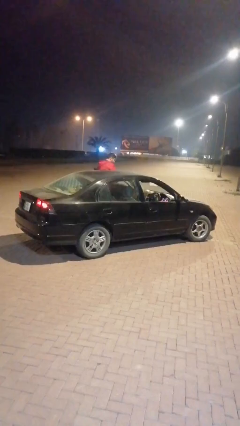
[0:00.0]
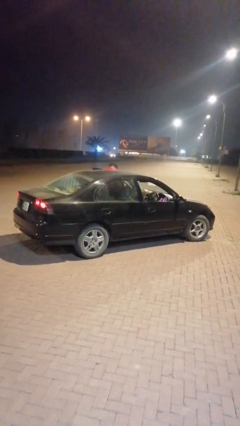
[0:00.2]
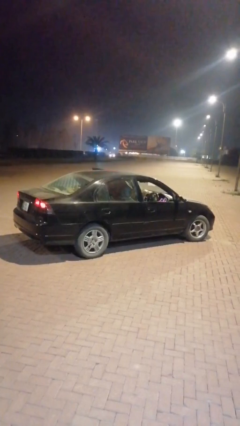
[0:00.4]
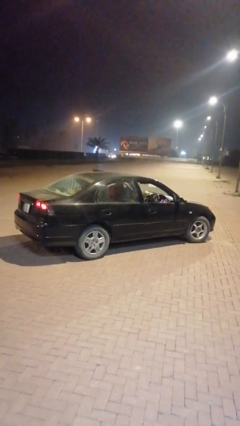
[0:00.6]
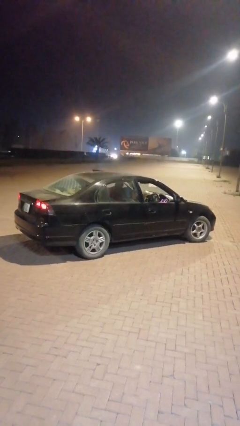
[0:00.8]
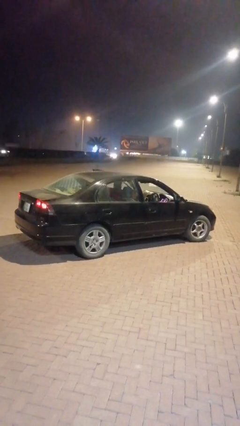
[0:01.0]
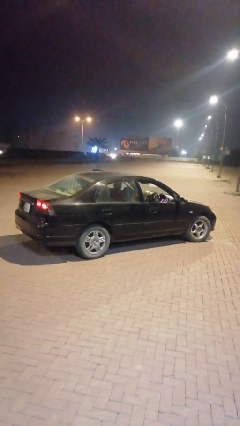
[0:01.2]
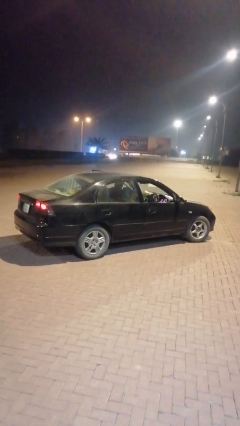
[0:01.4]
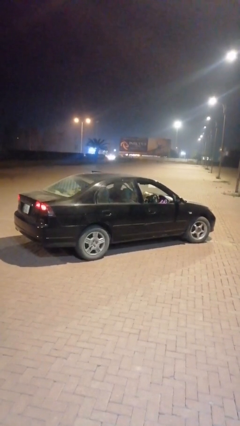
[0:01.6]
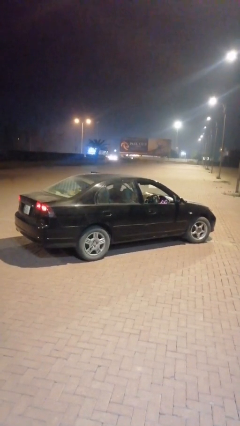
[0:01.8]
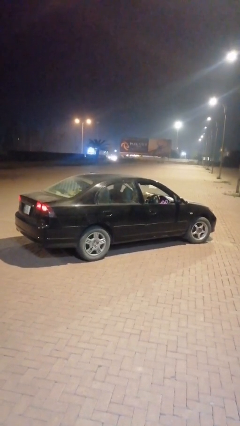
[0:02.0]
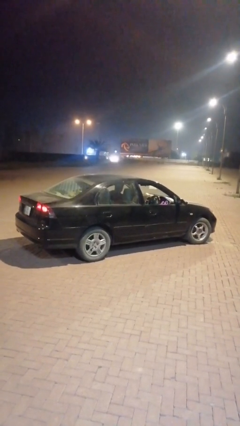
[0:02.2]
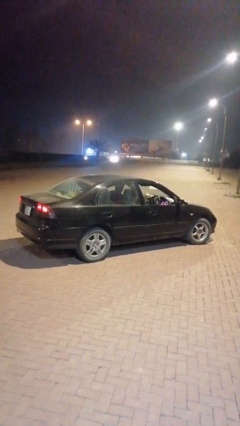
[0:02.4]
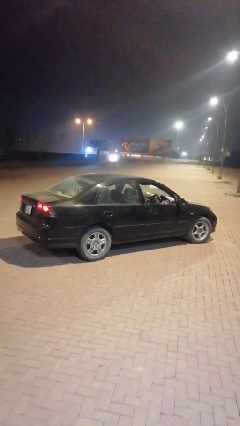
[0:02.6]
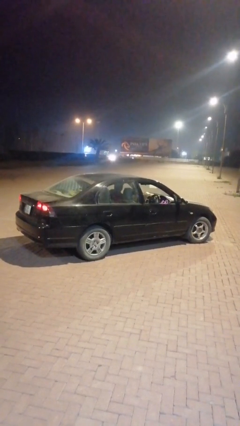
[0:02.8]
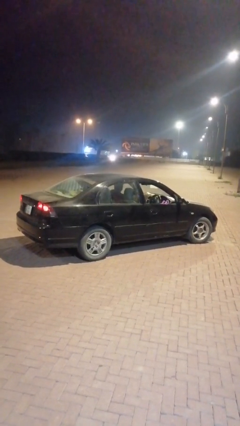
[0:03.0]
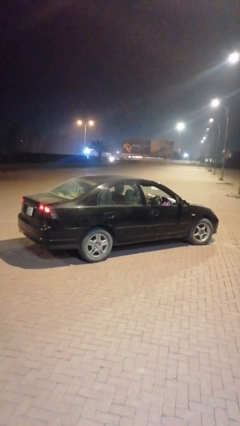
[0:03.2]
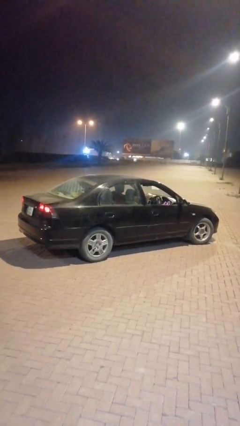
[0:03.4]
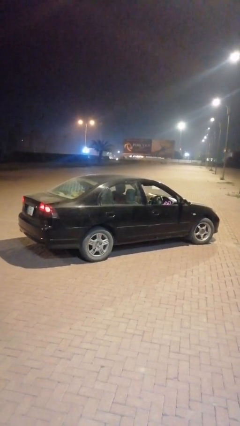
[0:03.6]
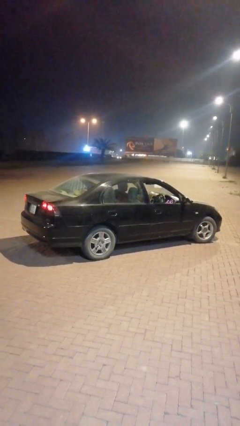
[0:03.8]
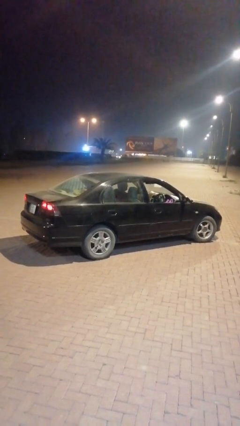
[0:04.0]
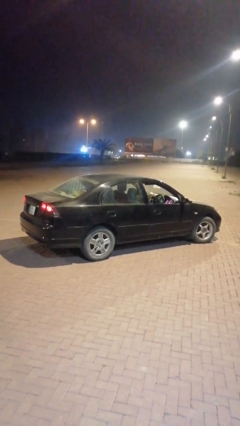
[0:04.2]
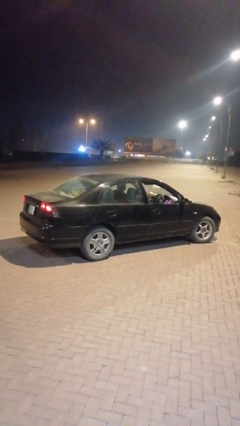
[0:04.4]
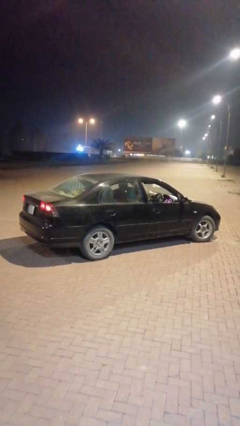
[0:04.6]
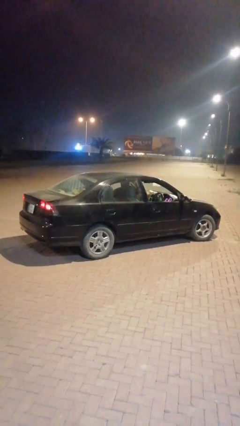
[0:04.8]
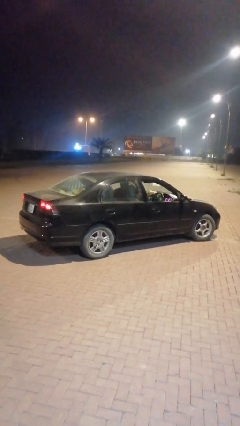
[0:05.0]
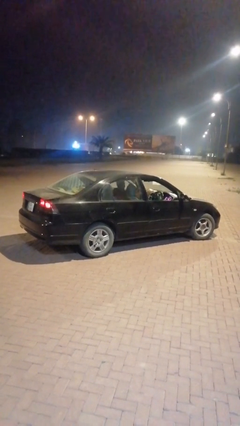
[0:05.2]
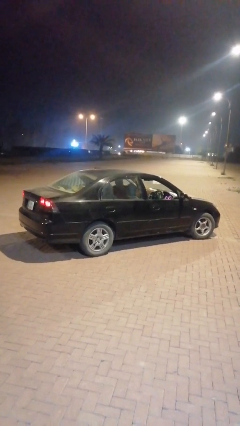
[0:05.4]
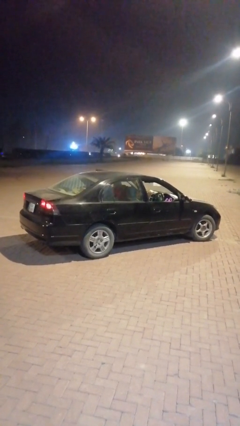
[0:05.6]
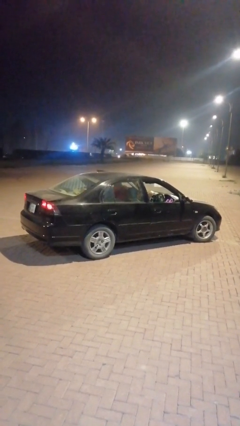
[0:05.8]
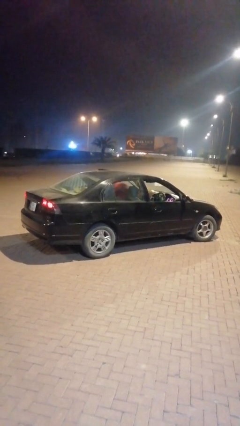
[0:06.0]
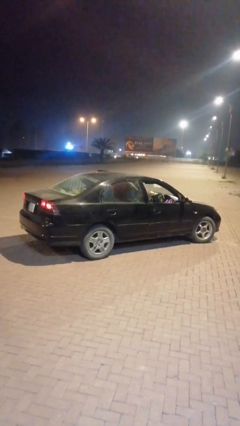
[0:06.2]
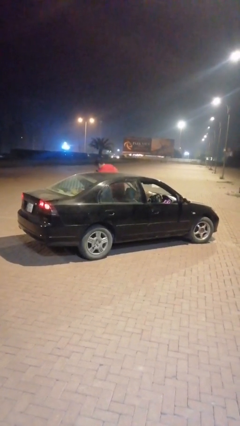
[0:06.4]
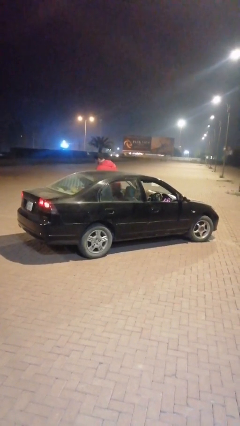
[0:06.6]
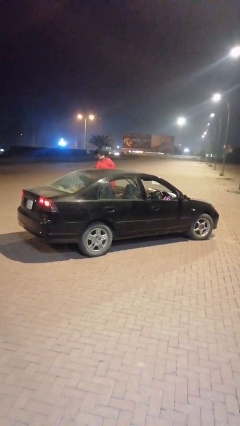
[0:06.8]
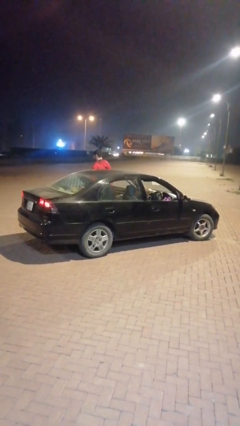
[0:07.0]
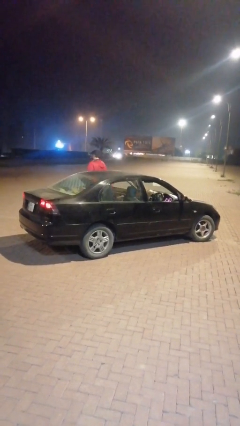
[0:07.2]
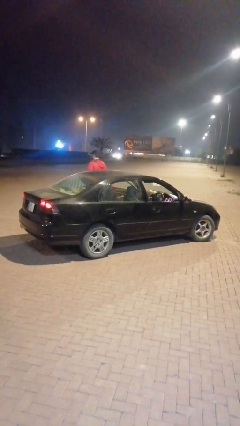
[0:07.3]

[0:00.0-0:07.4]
car picks up person

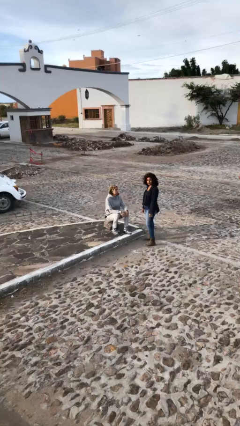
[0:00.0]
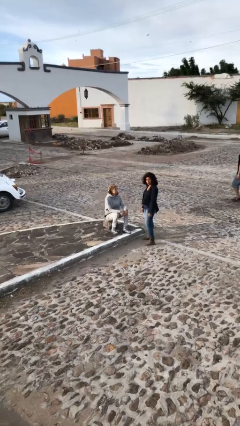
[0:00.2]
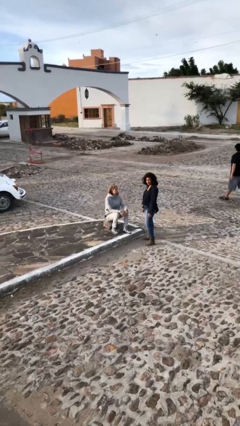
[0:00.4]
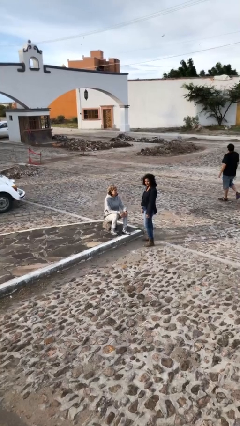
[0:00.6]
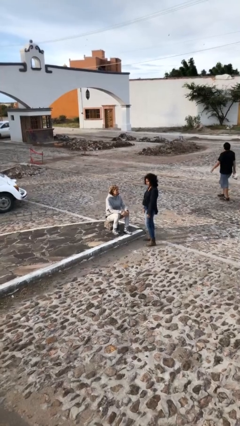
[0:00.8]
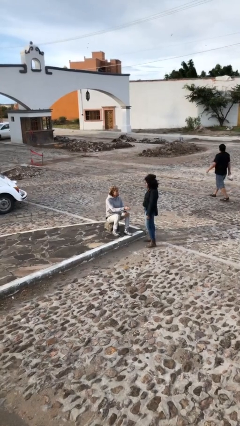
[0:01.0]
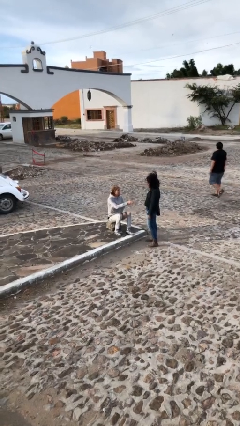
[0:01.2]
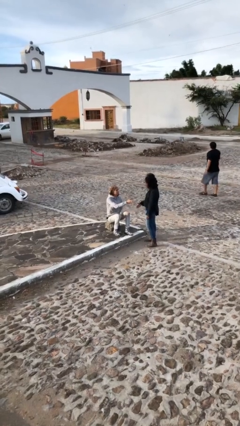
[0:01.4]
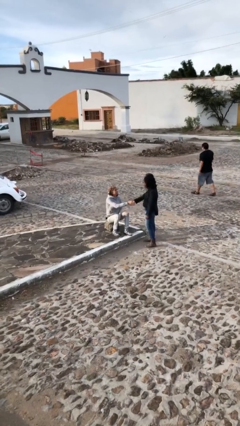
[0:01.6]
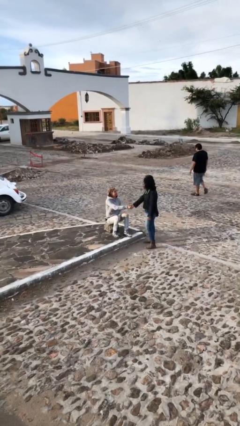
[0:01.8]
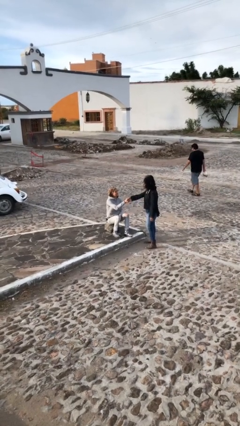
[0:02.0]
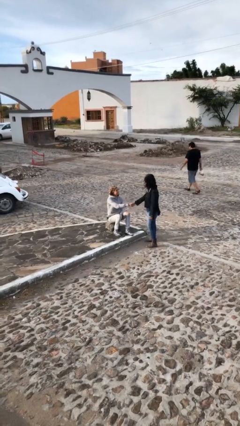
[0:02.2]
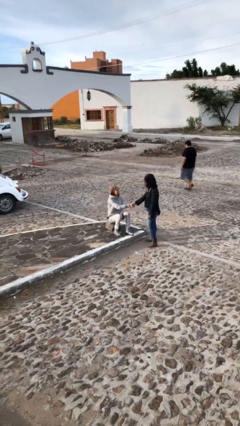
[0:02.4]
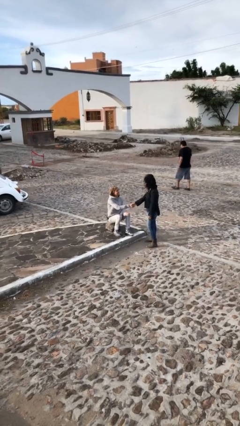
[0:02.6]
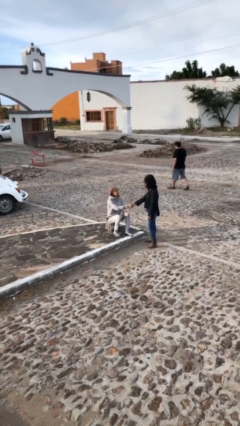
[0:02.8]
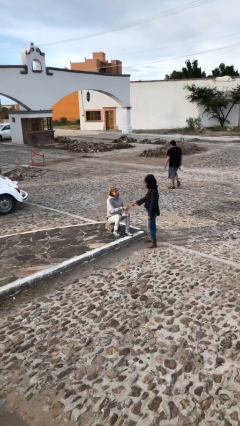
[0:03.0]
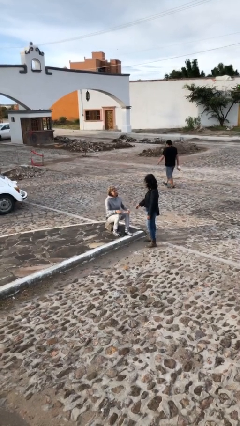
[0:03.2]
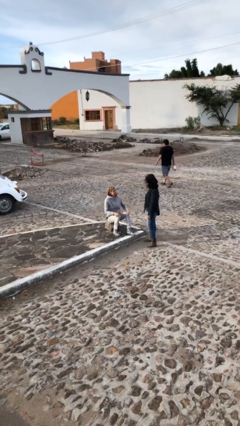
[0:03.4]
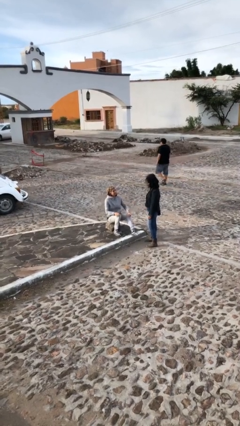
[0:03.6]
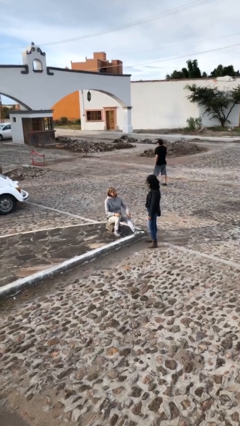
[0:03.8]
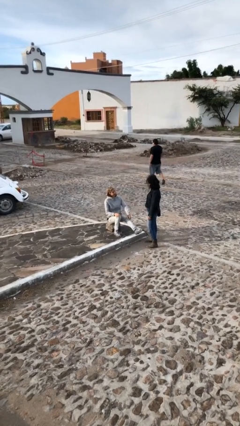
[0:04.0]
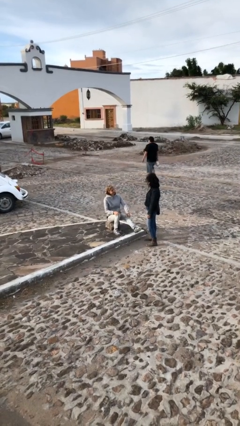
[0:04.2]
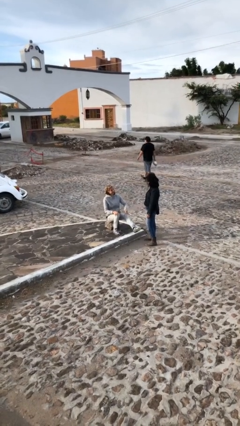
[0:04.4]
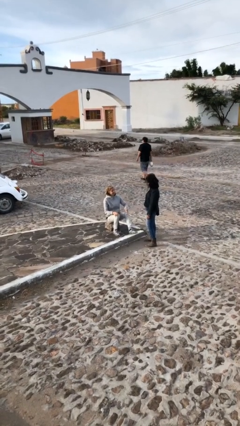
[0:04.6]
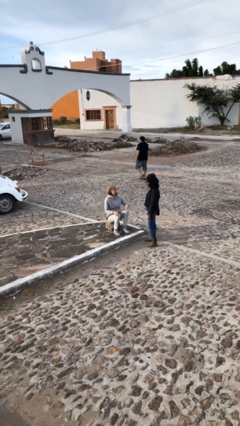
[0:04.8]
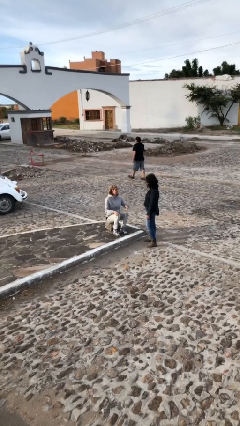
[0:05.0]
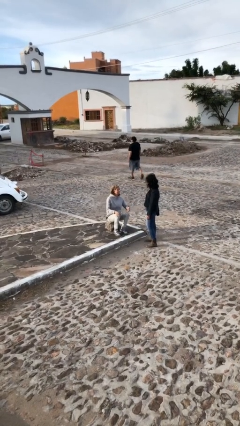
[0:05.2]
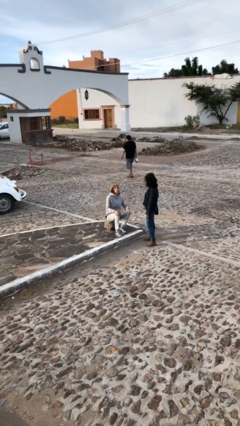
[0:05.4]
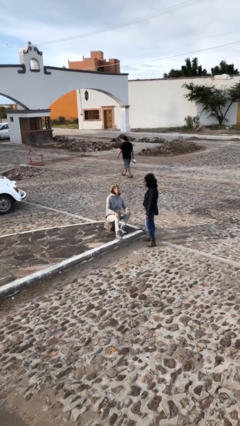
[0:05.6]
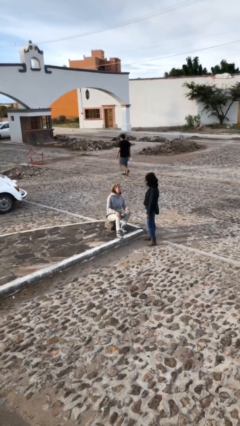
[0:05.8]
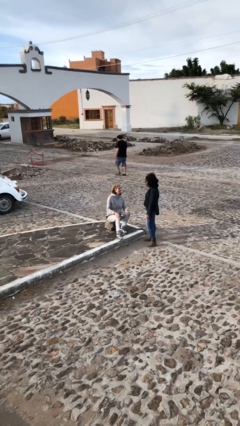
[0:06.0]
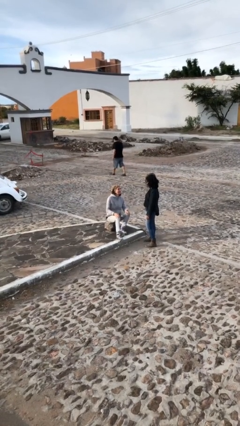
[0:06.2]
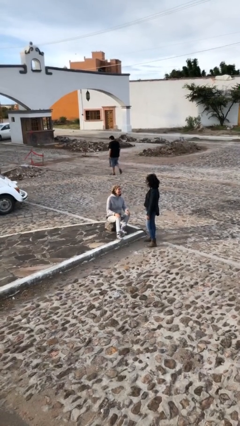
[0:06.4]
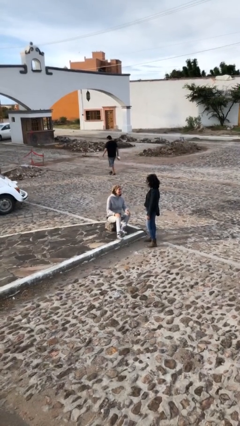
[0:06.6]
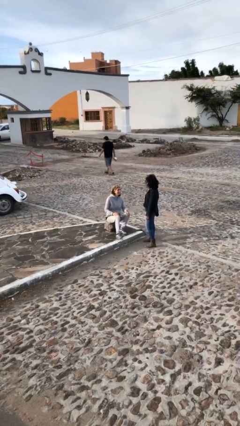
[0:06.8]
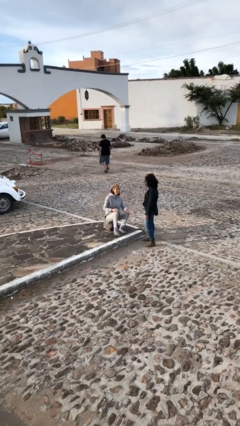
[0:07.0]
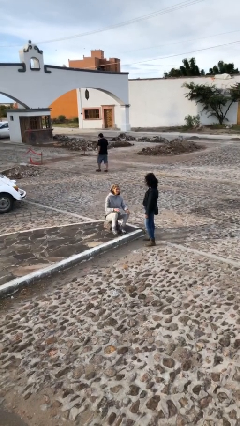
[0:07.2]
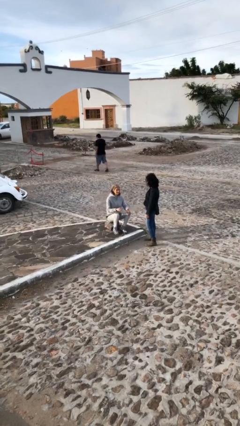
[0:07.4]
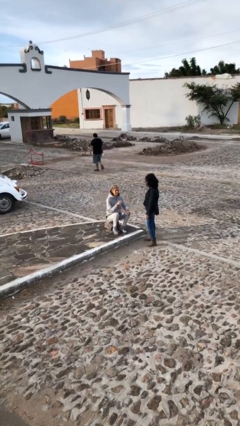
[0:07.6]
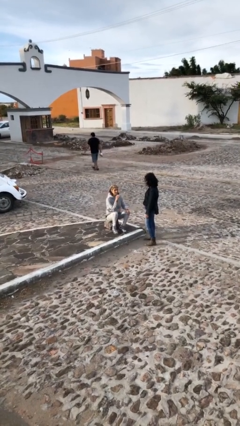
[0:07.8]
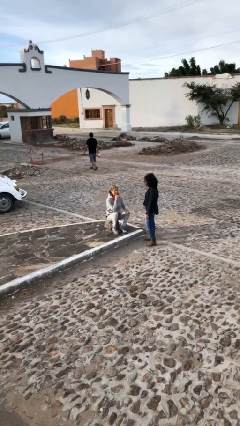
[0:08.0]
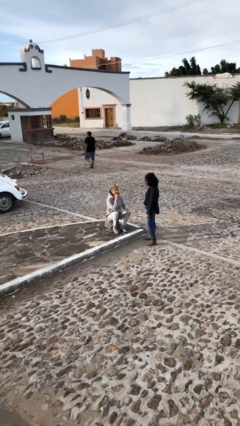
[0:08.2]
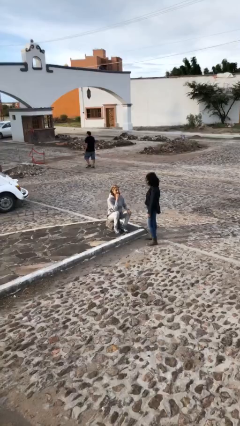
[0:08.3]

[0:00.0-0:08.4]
person shakes hand

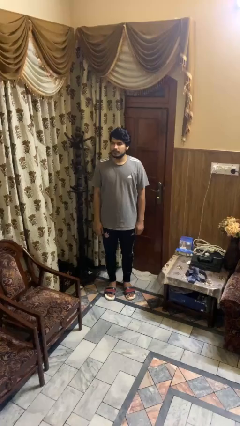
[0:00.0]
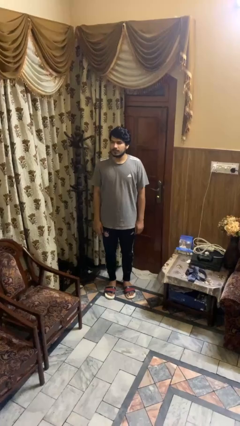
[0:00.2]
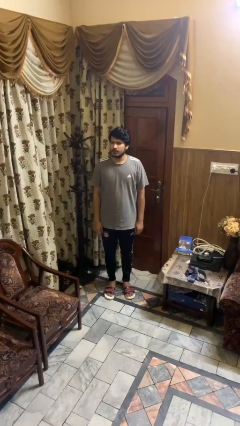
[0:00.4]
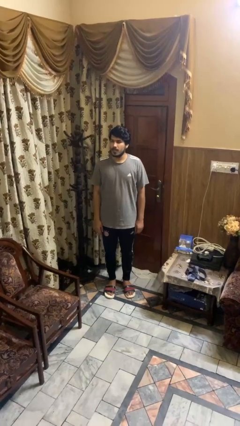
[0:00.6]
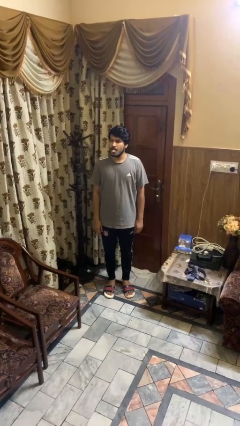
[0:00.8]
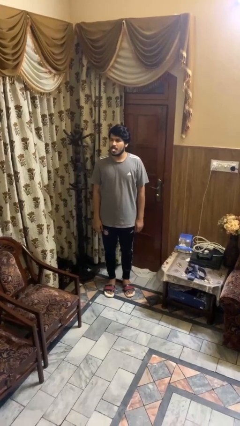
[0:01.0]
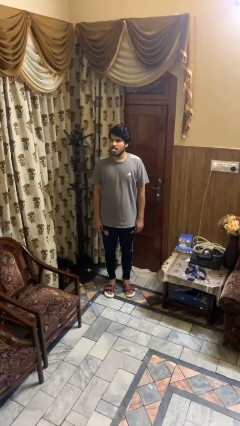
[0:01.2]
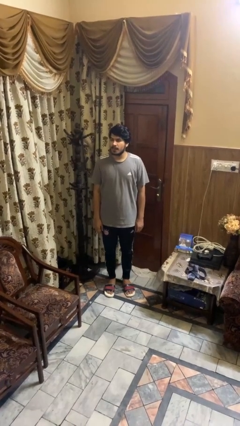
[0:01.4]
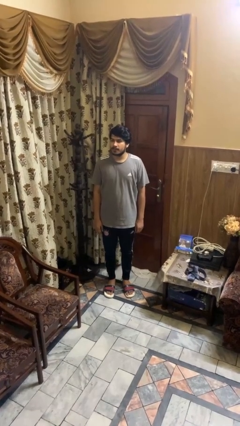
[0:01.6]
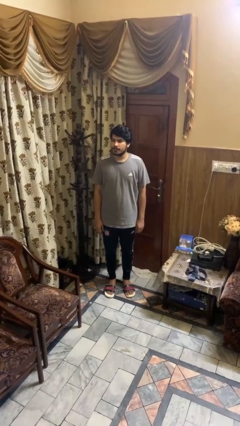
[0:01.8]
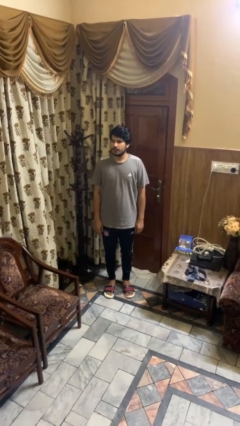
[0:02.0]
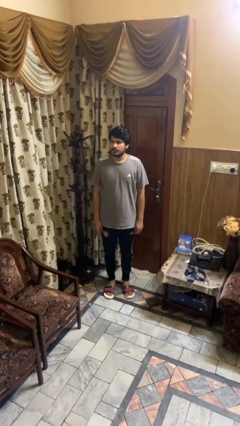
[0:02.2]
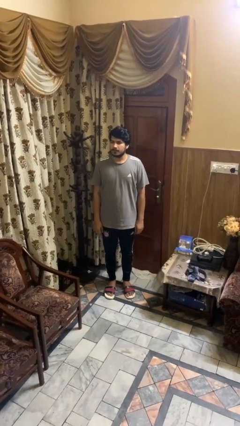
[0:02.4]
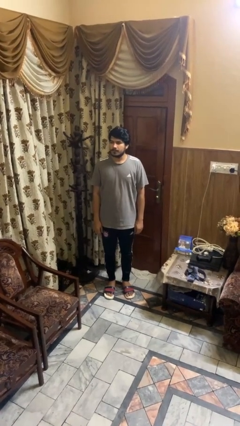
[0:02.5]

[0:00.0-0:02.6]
person sticks out tongue
